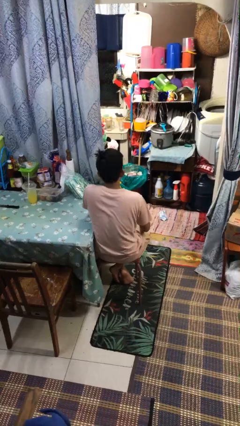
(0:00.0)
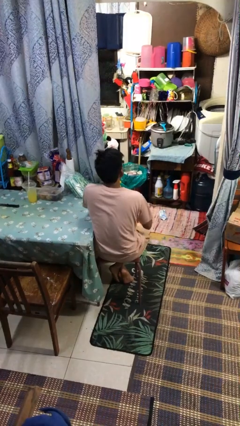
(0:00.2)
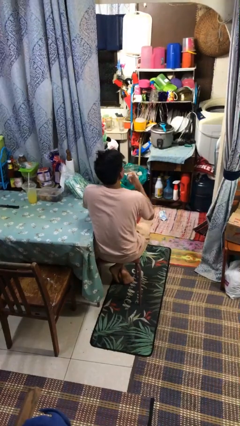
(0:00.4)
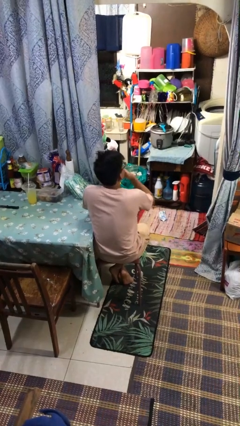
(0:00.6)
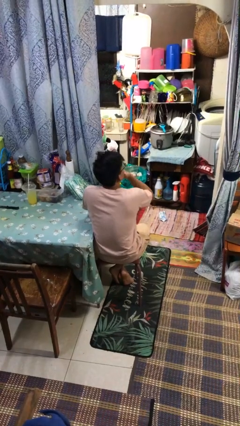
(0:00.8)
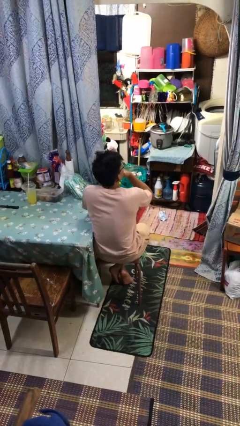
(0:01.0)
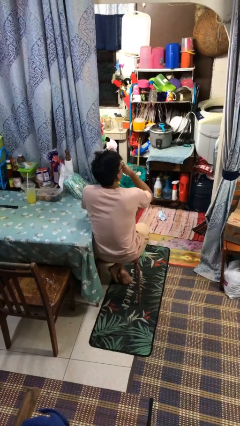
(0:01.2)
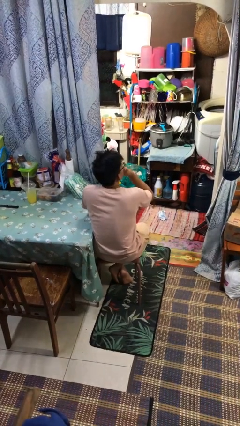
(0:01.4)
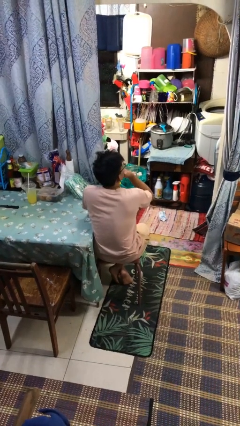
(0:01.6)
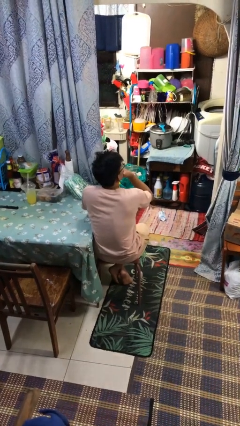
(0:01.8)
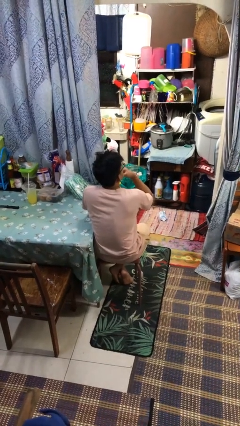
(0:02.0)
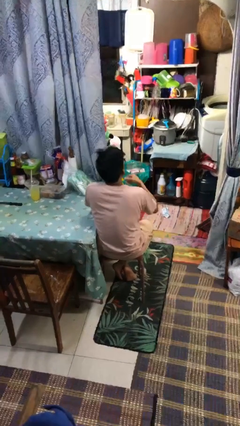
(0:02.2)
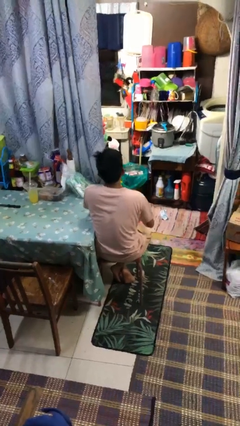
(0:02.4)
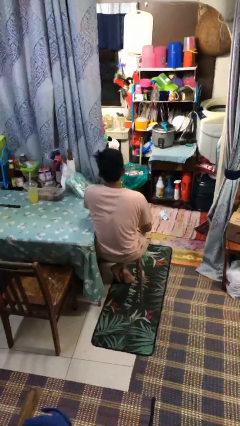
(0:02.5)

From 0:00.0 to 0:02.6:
person strokes chin

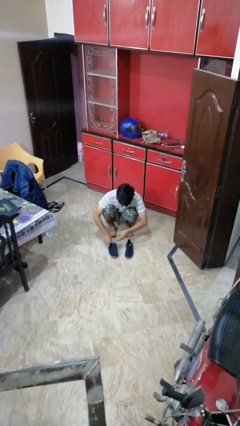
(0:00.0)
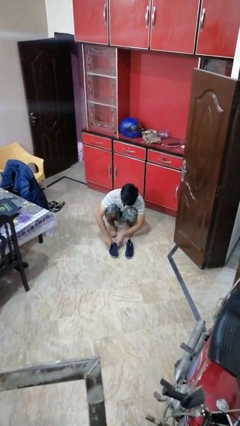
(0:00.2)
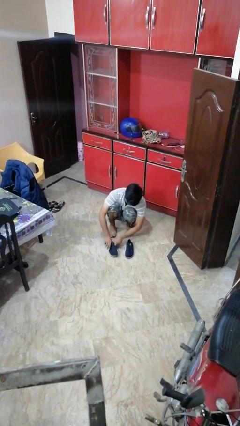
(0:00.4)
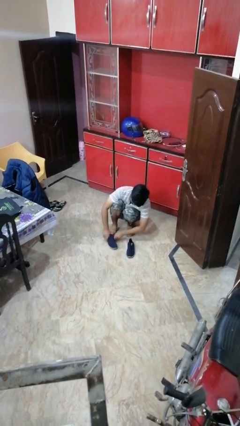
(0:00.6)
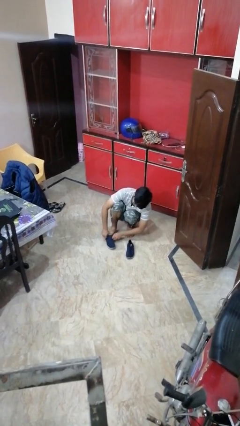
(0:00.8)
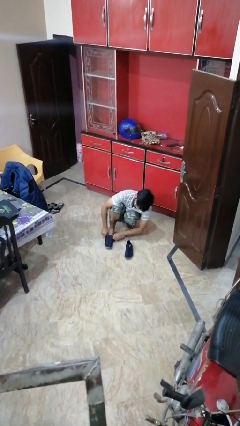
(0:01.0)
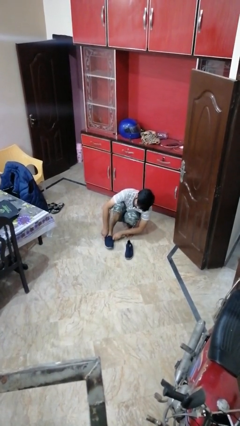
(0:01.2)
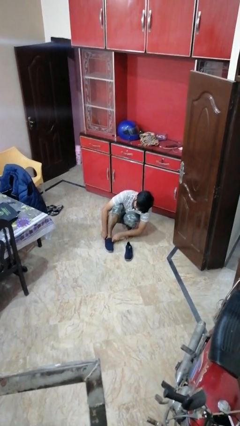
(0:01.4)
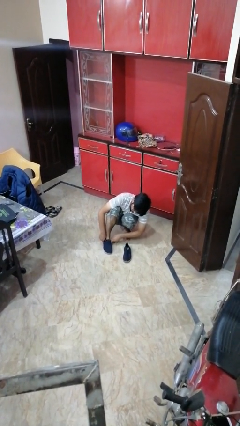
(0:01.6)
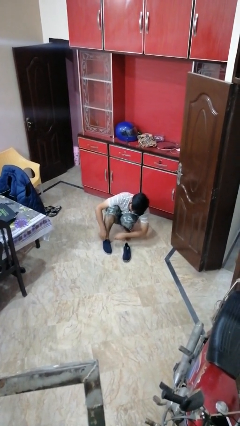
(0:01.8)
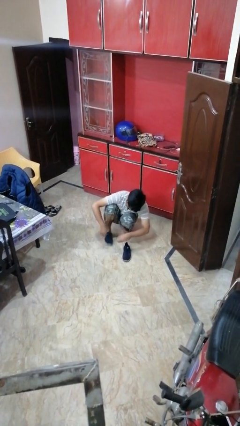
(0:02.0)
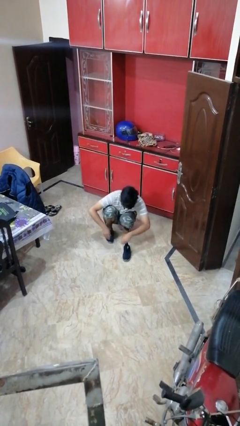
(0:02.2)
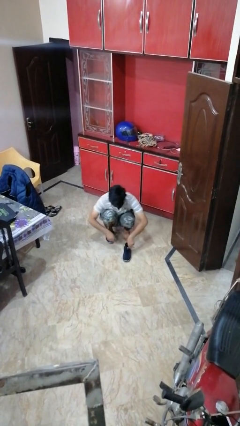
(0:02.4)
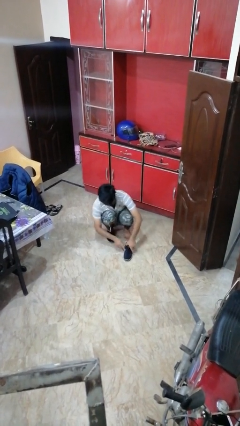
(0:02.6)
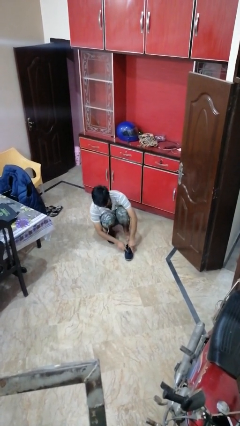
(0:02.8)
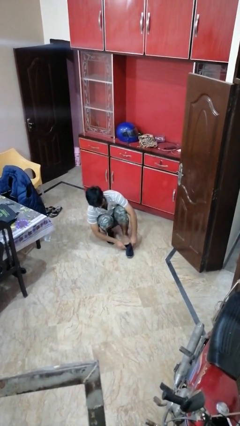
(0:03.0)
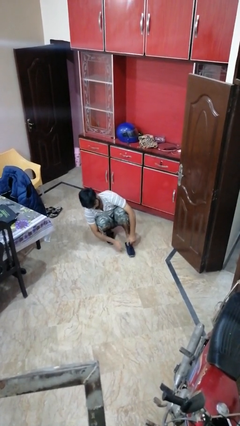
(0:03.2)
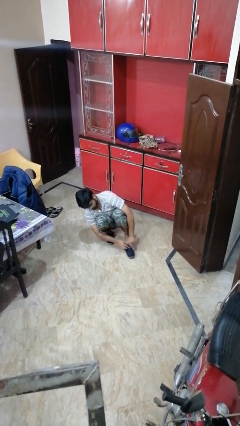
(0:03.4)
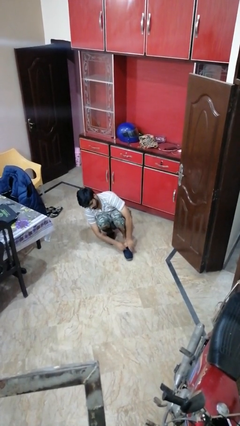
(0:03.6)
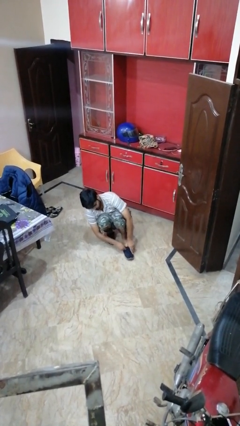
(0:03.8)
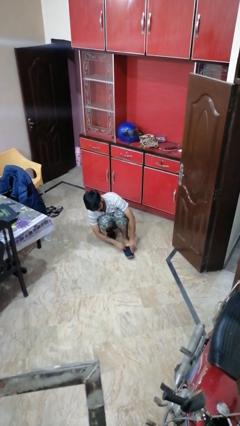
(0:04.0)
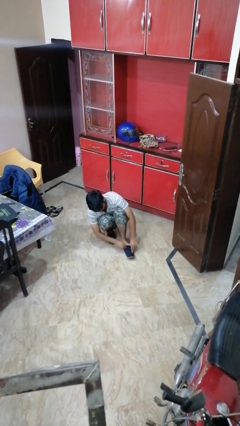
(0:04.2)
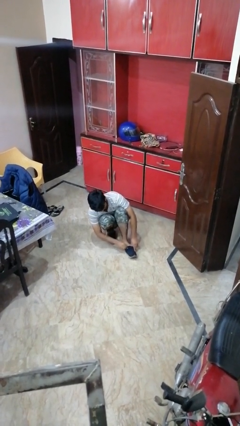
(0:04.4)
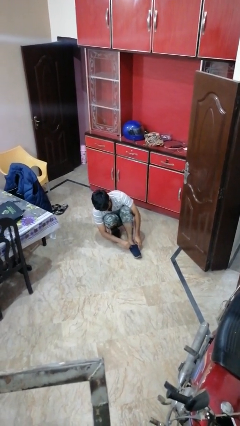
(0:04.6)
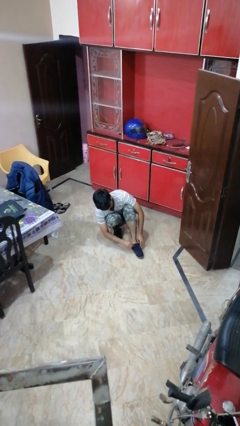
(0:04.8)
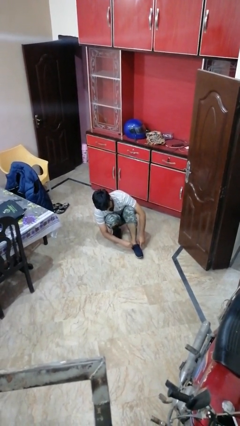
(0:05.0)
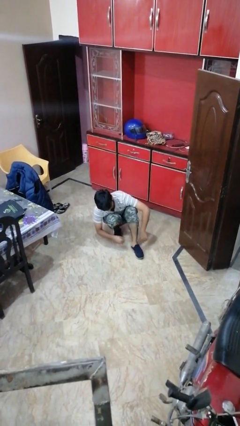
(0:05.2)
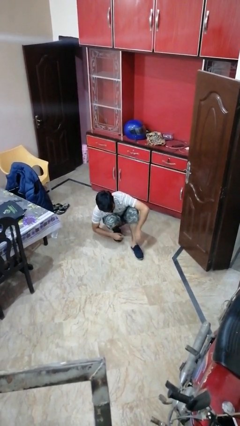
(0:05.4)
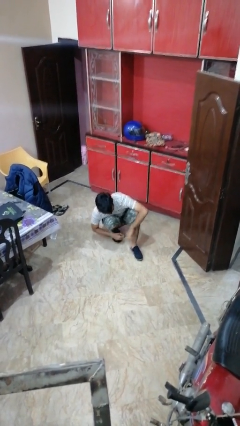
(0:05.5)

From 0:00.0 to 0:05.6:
person puts on shoes

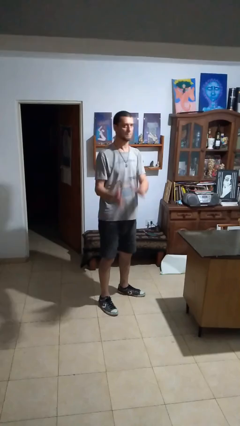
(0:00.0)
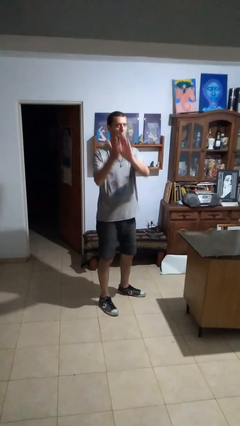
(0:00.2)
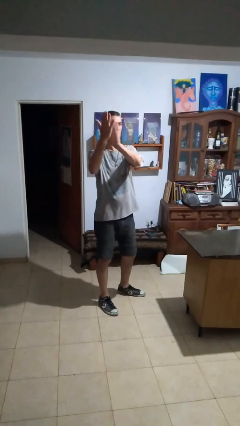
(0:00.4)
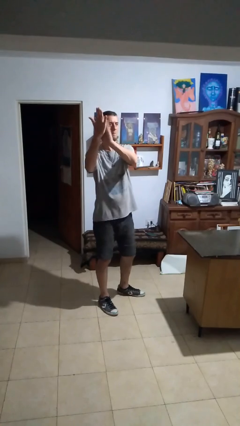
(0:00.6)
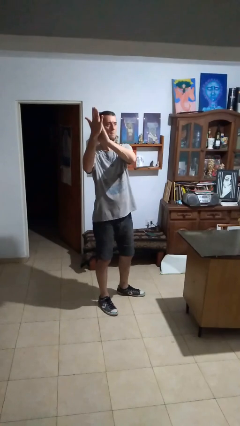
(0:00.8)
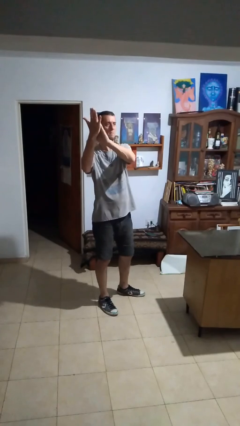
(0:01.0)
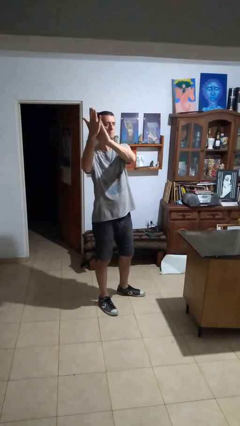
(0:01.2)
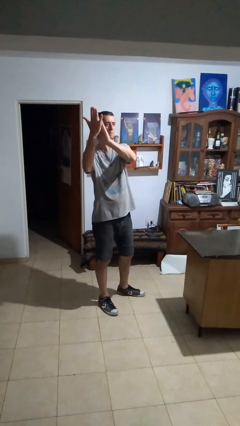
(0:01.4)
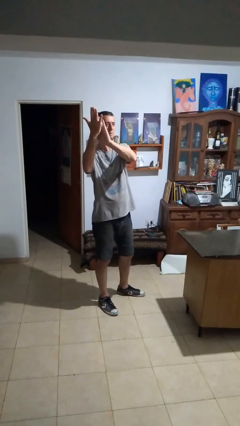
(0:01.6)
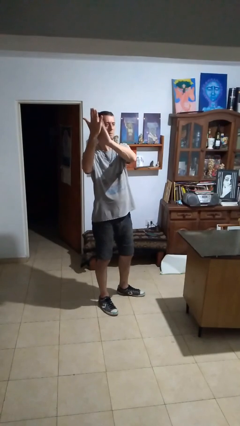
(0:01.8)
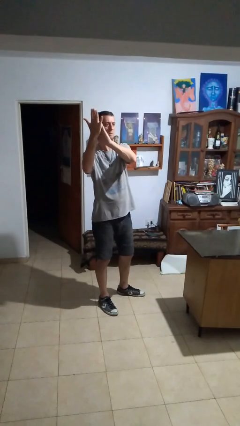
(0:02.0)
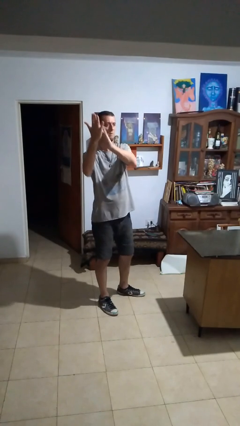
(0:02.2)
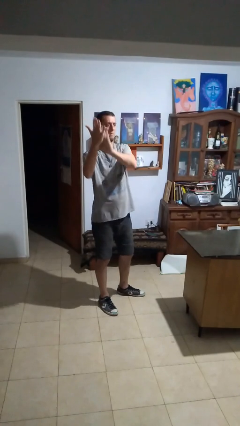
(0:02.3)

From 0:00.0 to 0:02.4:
person claps hands

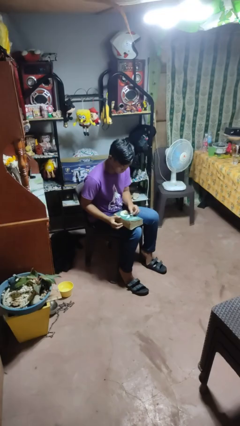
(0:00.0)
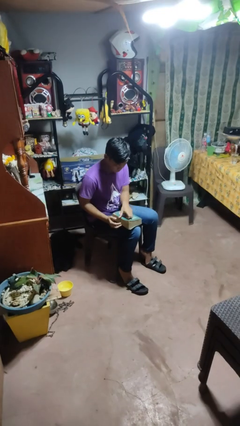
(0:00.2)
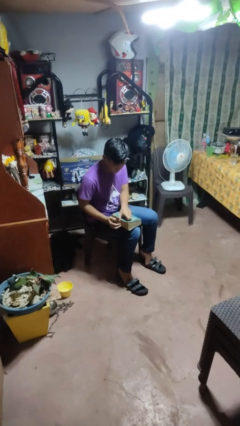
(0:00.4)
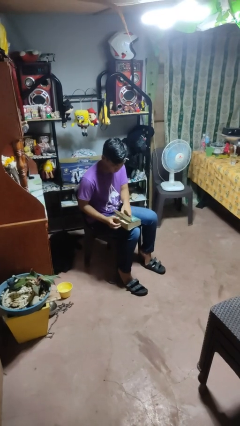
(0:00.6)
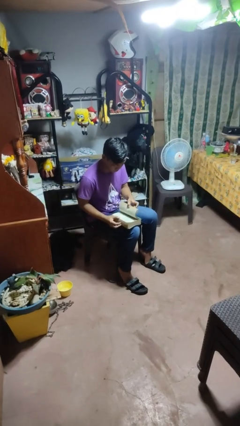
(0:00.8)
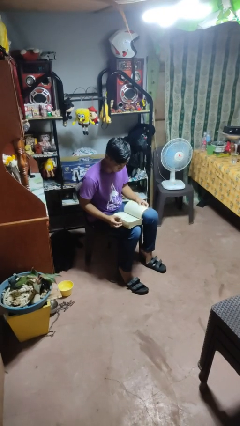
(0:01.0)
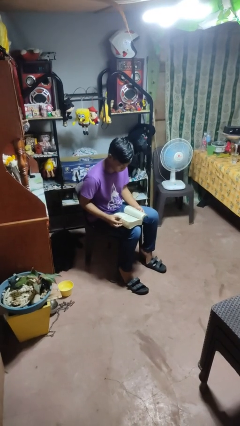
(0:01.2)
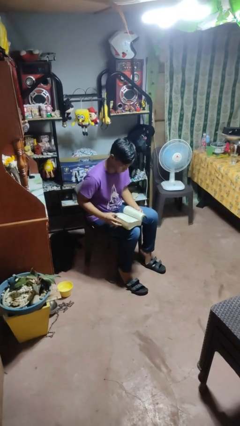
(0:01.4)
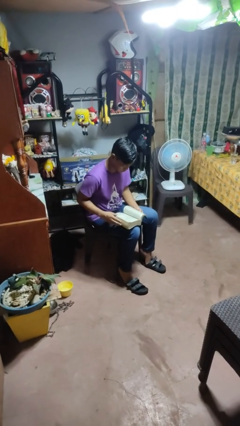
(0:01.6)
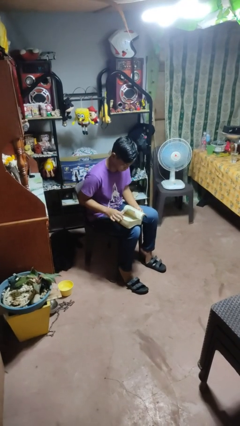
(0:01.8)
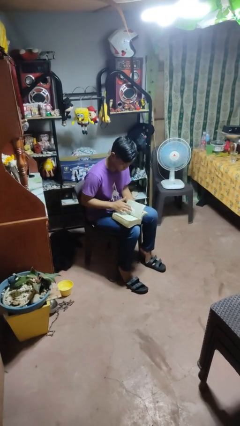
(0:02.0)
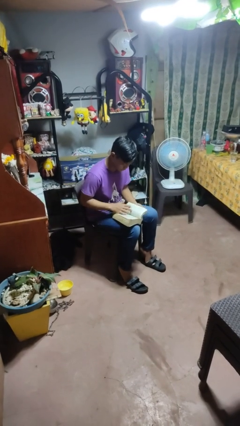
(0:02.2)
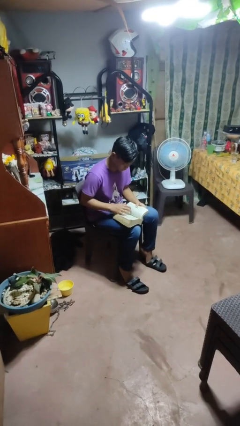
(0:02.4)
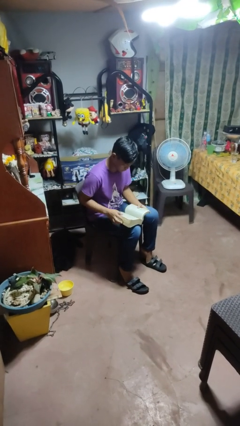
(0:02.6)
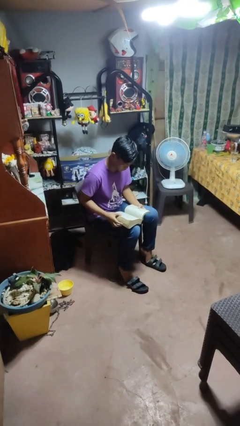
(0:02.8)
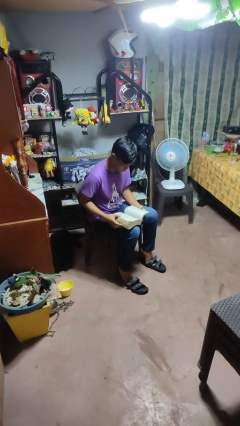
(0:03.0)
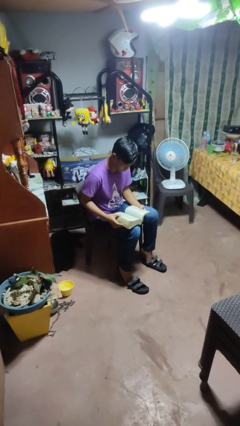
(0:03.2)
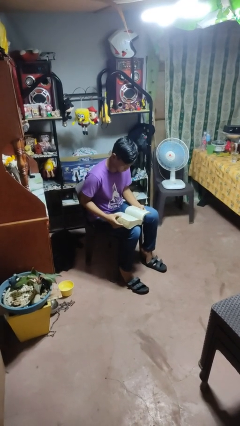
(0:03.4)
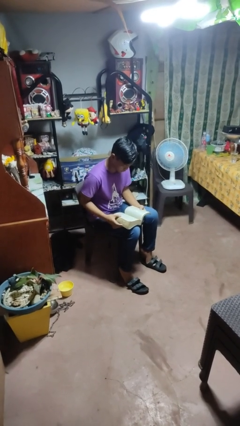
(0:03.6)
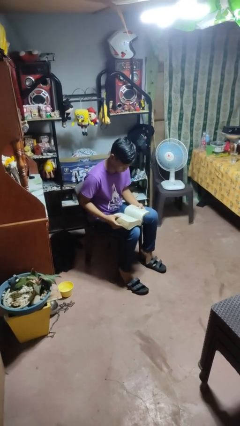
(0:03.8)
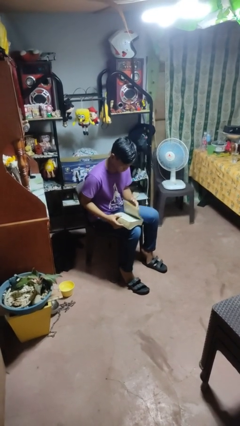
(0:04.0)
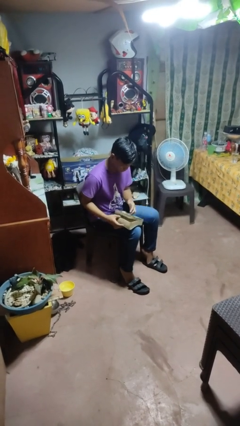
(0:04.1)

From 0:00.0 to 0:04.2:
person reads book

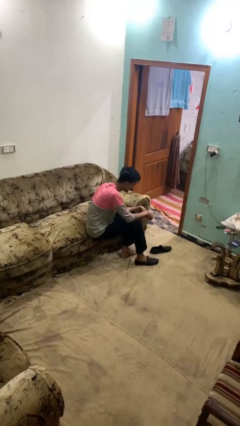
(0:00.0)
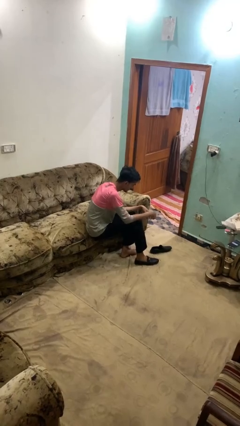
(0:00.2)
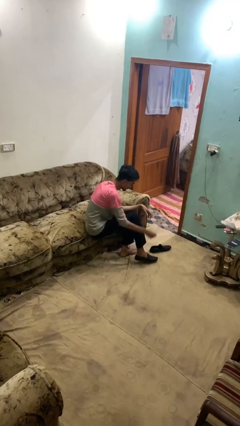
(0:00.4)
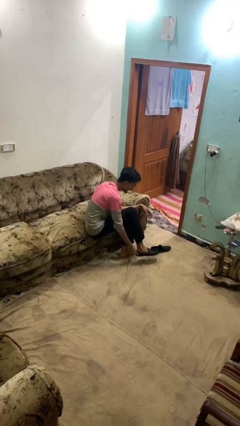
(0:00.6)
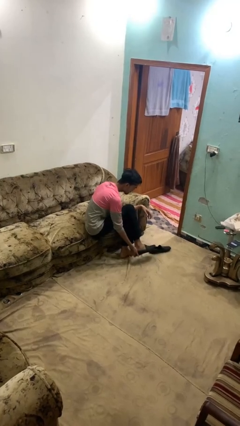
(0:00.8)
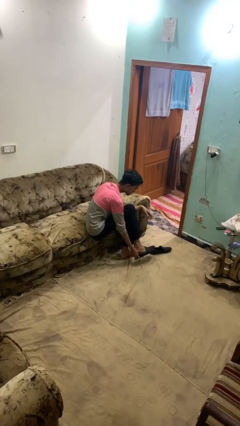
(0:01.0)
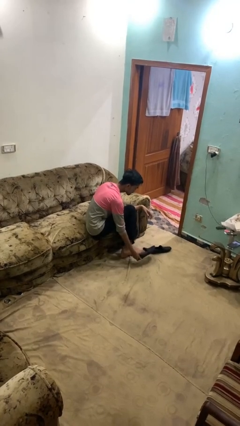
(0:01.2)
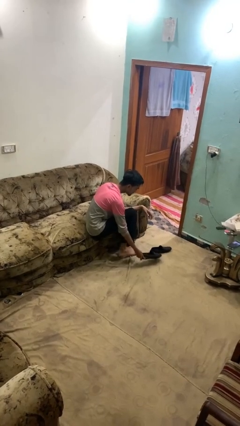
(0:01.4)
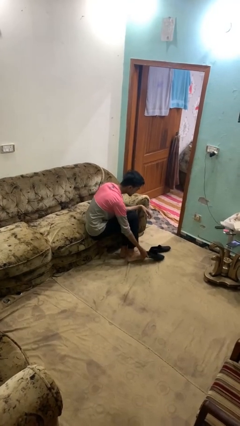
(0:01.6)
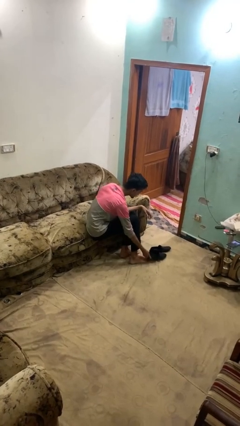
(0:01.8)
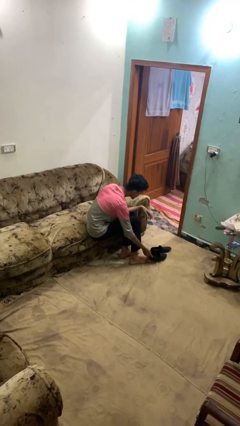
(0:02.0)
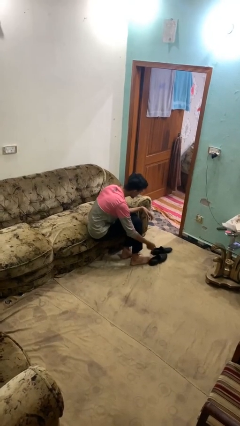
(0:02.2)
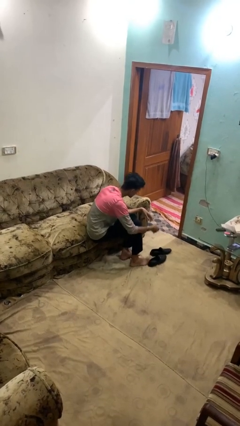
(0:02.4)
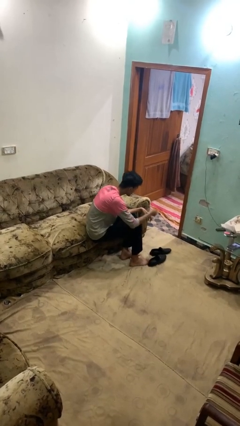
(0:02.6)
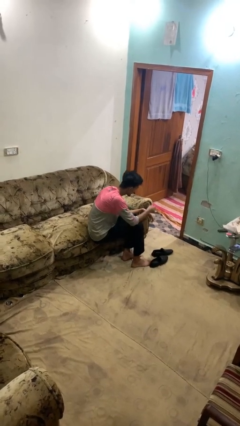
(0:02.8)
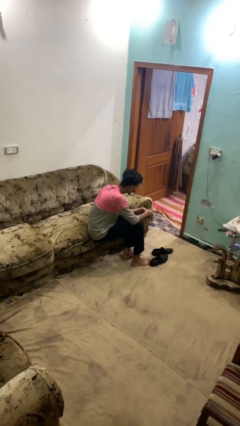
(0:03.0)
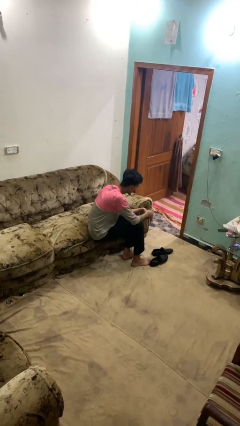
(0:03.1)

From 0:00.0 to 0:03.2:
person takes off shoes
